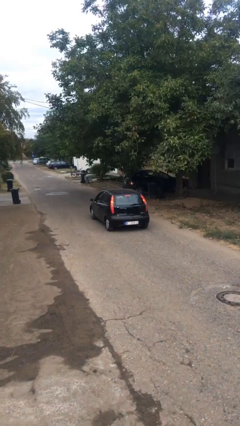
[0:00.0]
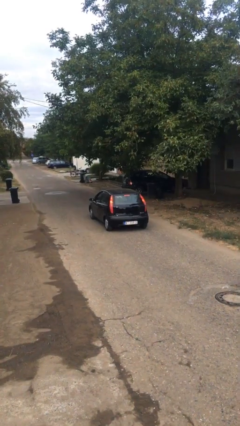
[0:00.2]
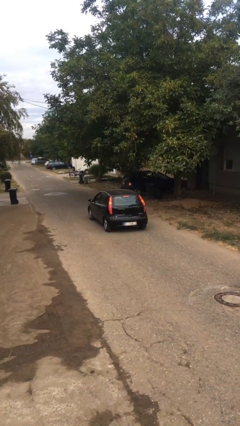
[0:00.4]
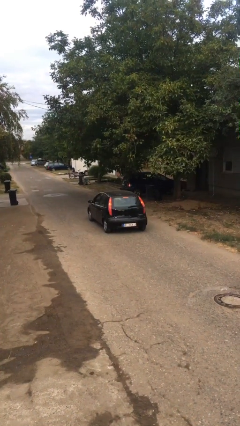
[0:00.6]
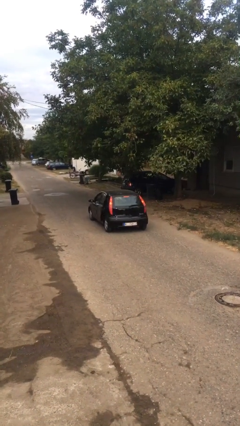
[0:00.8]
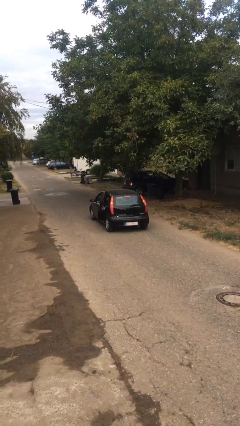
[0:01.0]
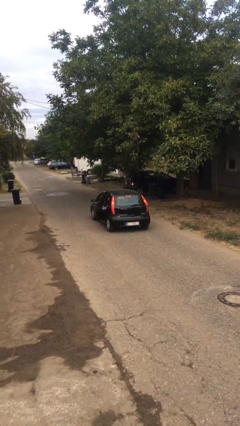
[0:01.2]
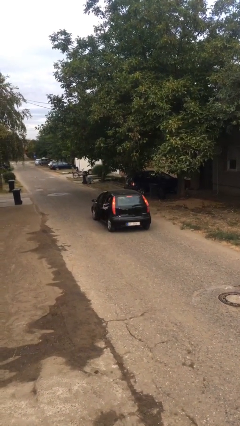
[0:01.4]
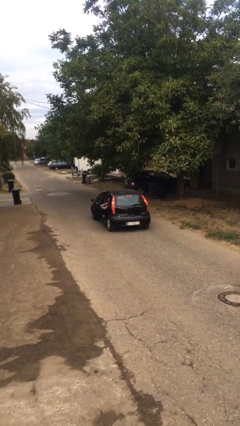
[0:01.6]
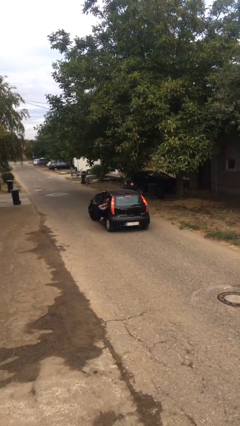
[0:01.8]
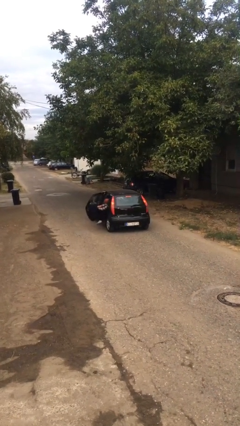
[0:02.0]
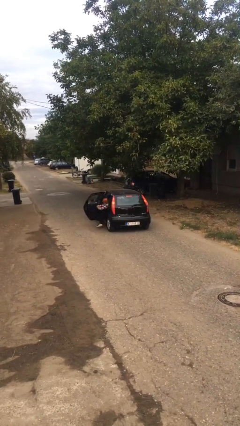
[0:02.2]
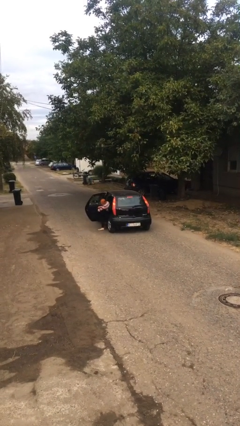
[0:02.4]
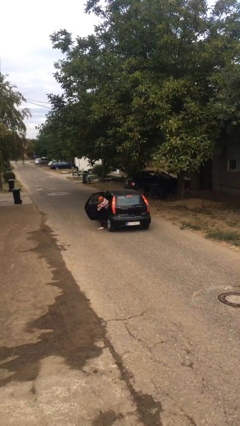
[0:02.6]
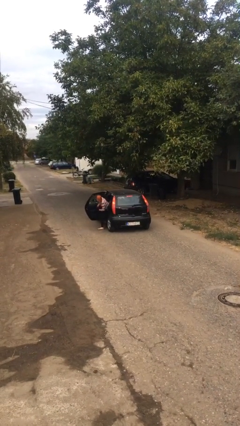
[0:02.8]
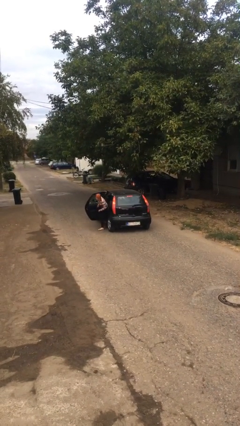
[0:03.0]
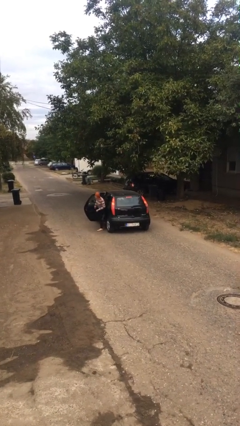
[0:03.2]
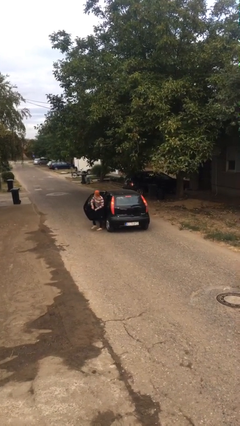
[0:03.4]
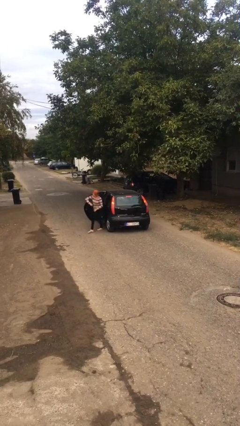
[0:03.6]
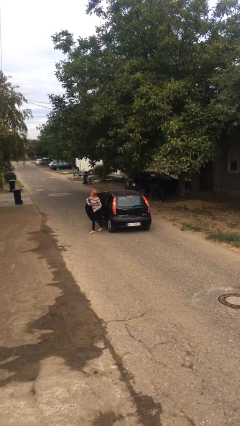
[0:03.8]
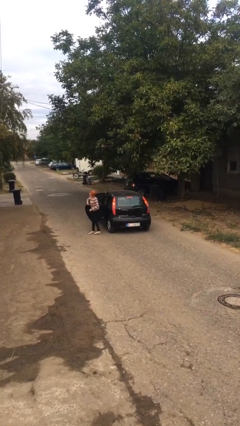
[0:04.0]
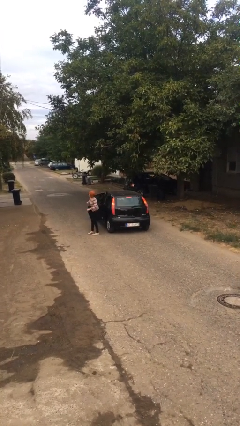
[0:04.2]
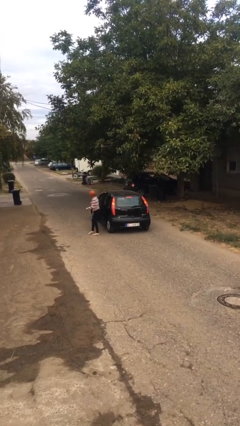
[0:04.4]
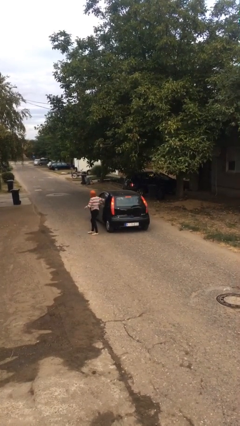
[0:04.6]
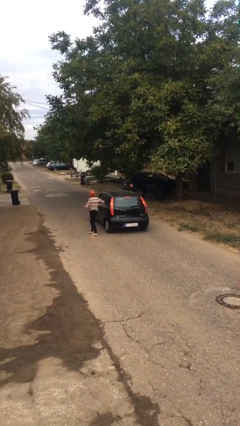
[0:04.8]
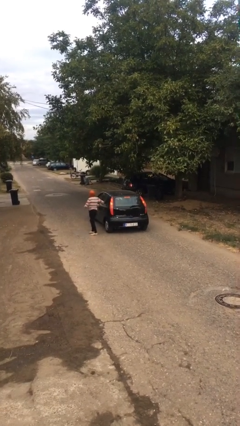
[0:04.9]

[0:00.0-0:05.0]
car drops off person

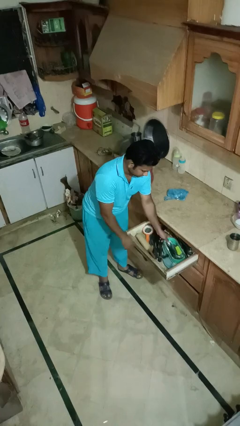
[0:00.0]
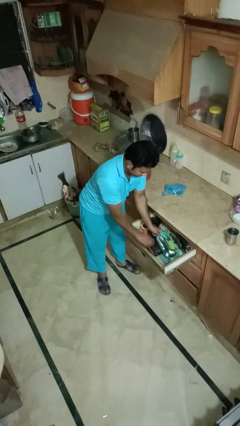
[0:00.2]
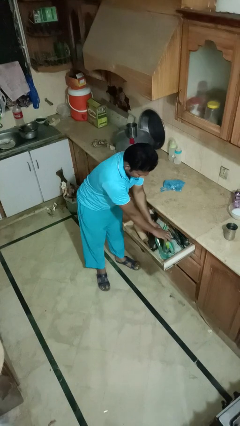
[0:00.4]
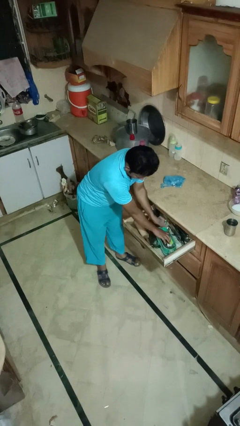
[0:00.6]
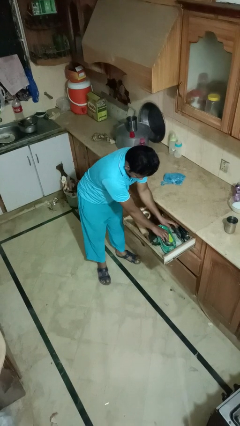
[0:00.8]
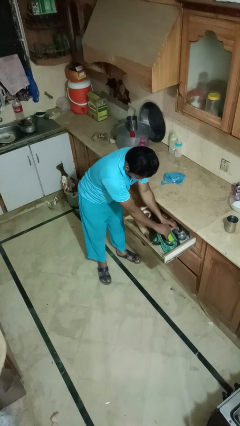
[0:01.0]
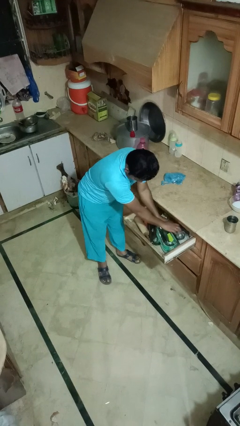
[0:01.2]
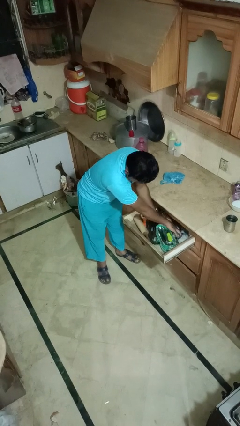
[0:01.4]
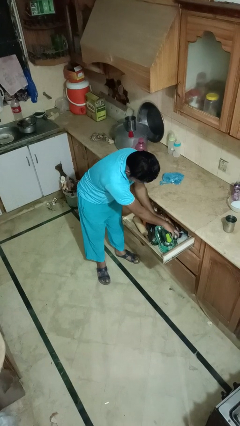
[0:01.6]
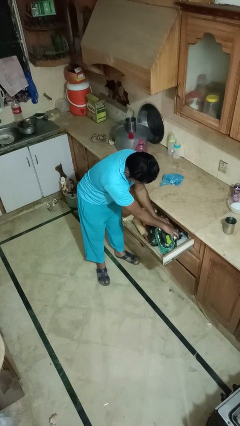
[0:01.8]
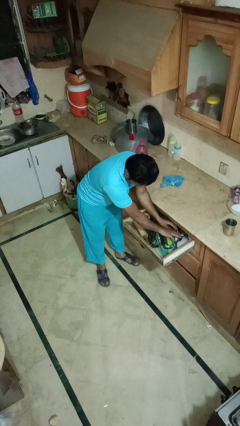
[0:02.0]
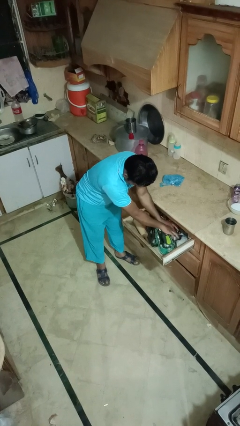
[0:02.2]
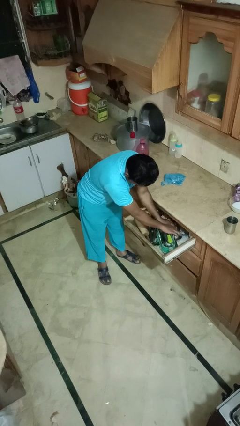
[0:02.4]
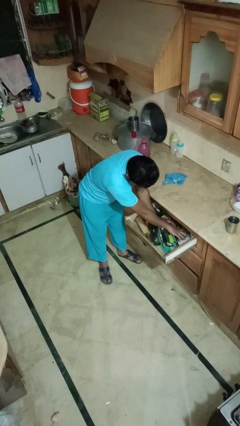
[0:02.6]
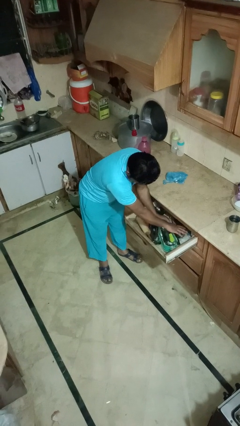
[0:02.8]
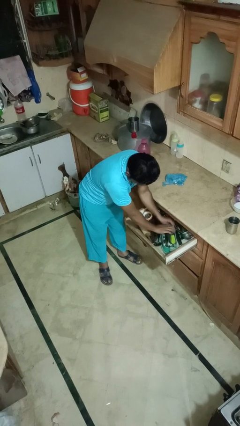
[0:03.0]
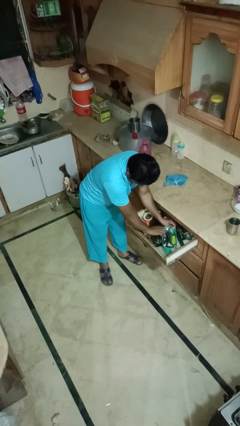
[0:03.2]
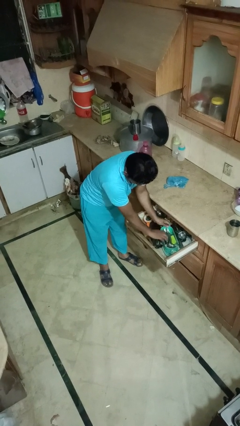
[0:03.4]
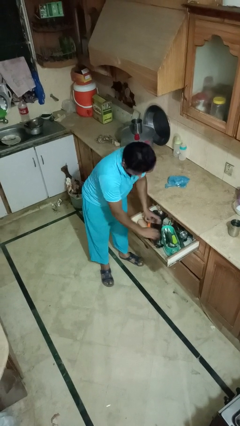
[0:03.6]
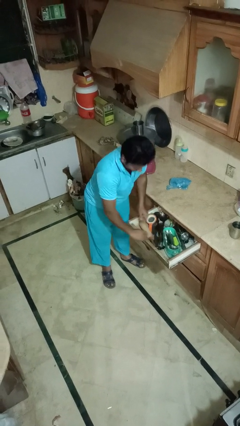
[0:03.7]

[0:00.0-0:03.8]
person searches in kitchen drawer

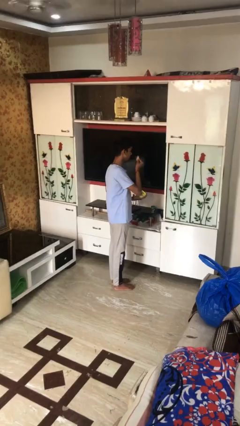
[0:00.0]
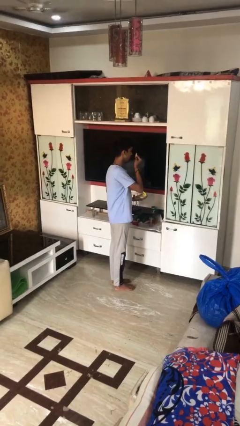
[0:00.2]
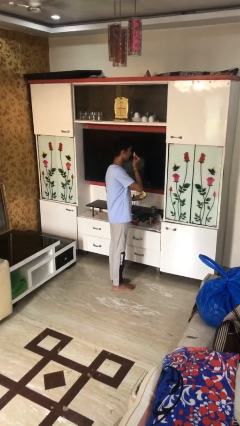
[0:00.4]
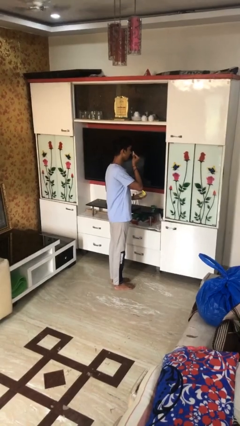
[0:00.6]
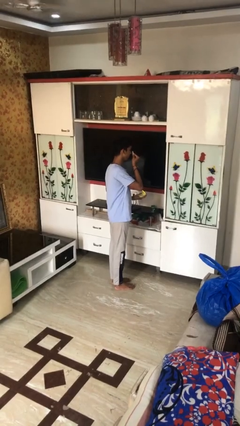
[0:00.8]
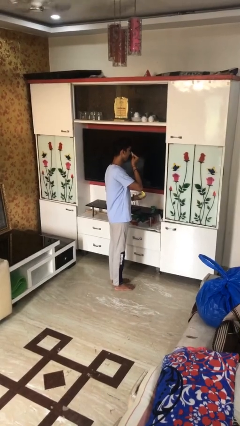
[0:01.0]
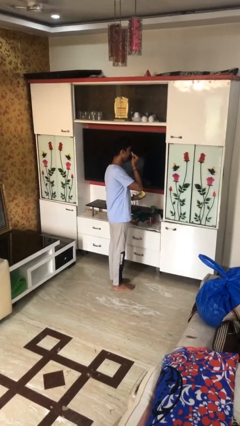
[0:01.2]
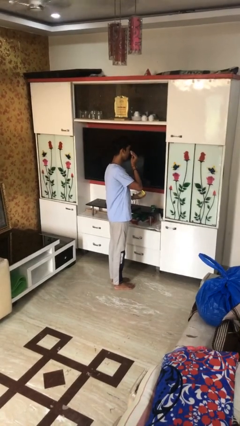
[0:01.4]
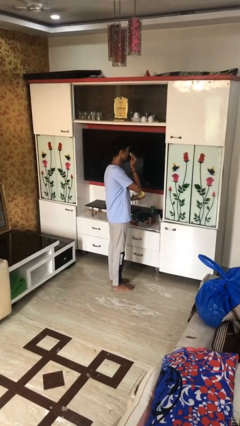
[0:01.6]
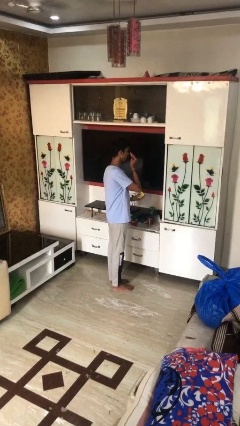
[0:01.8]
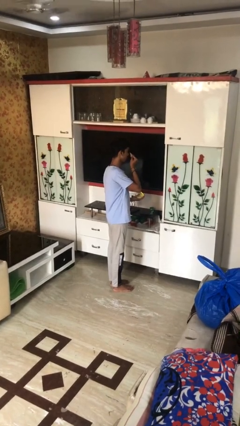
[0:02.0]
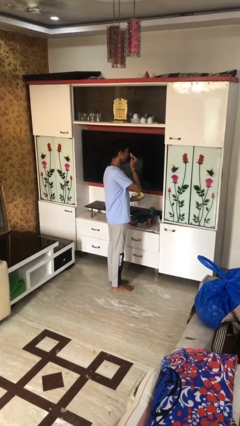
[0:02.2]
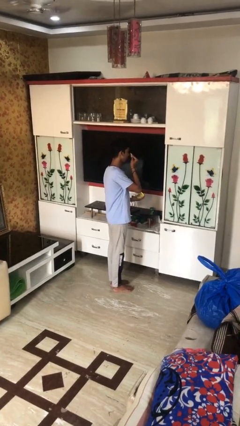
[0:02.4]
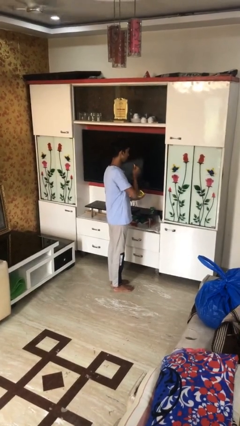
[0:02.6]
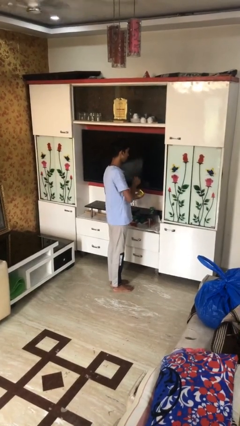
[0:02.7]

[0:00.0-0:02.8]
person applies foundation makeup

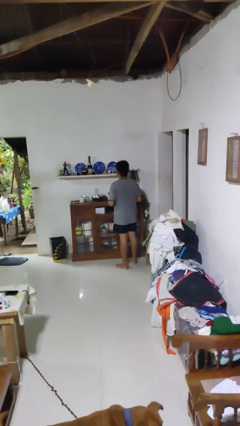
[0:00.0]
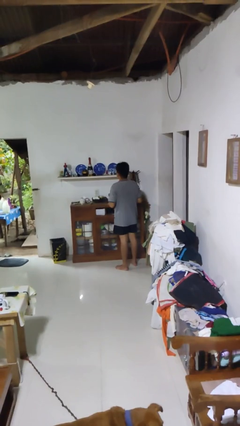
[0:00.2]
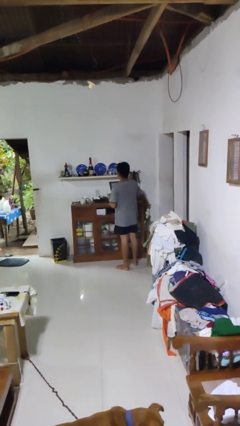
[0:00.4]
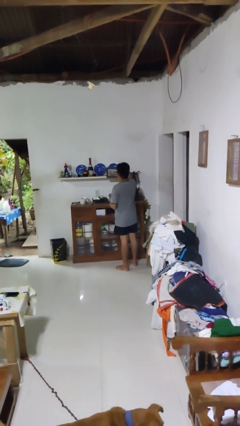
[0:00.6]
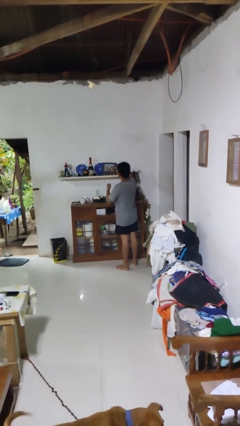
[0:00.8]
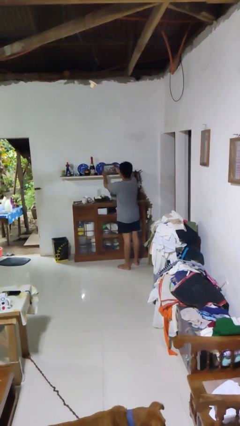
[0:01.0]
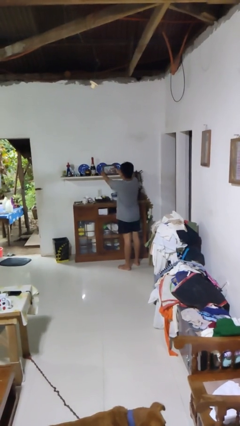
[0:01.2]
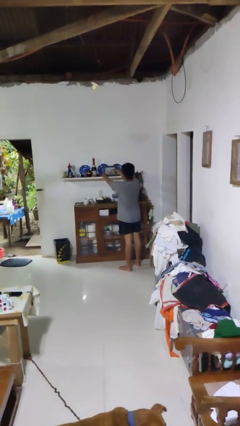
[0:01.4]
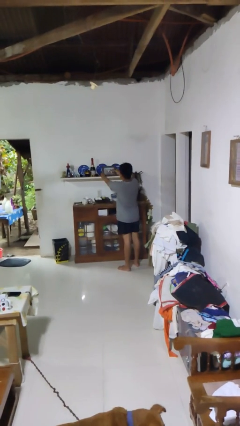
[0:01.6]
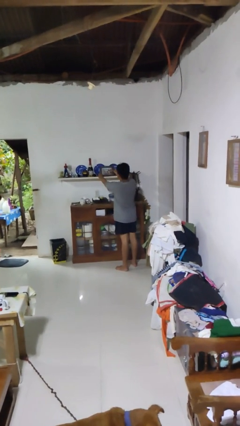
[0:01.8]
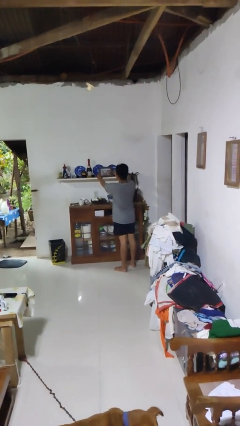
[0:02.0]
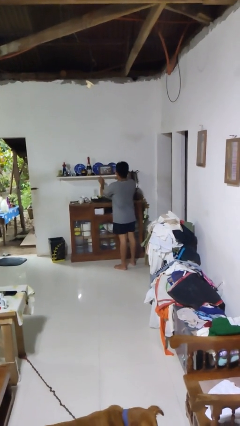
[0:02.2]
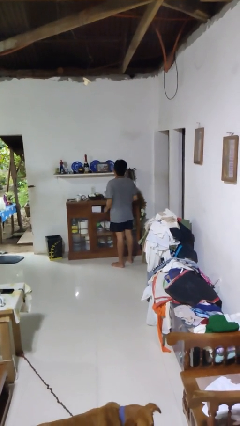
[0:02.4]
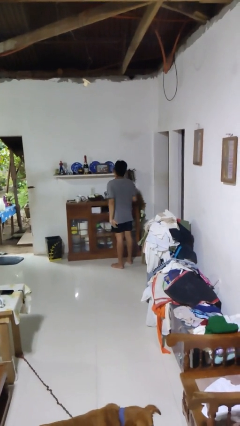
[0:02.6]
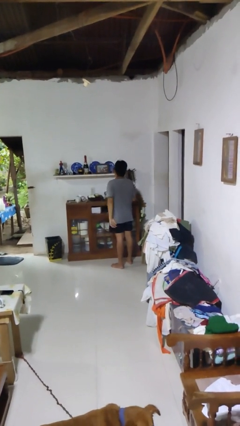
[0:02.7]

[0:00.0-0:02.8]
person puts down object on shelf

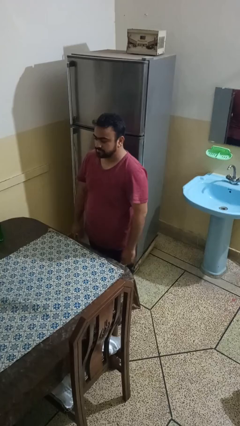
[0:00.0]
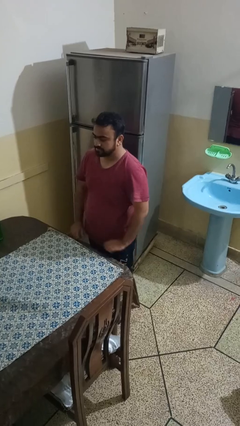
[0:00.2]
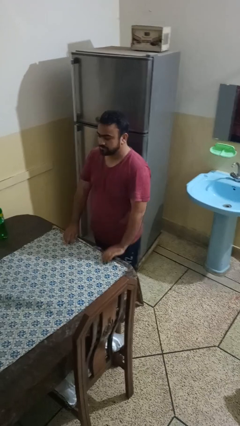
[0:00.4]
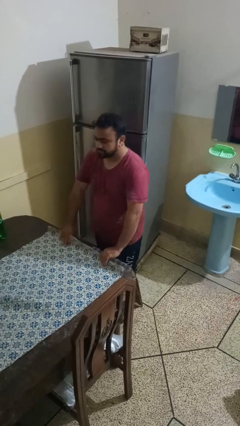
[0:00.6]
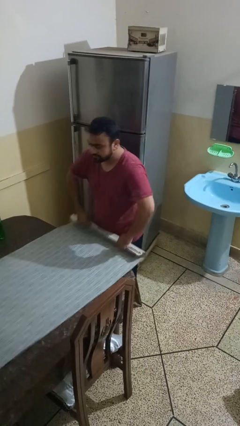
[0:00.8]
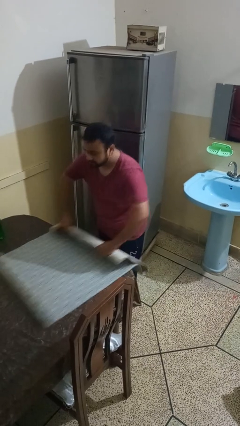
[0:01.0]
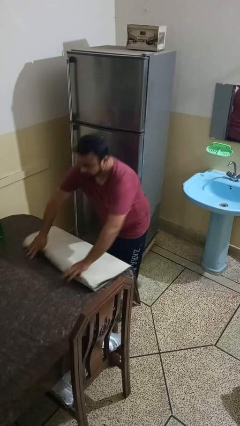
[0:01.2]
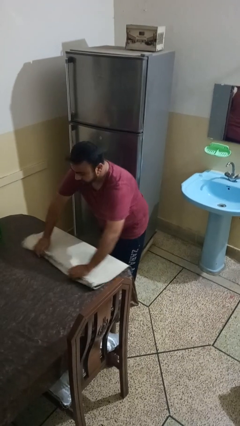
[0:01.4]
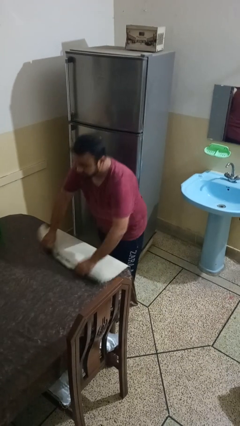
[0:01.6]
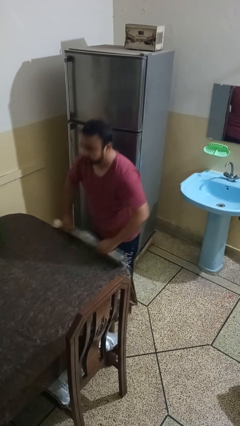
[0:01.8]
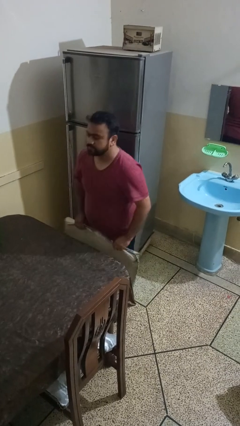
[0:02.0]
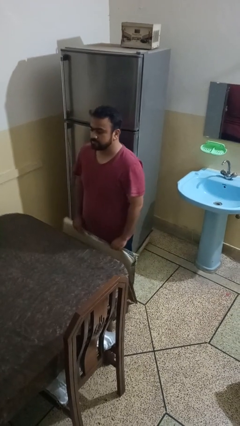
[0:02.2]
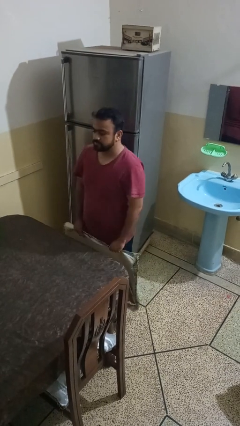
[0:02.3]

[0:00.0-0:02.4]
person folds tablecloth

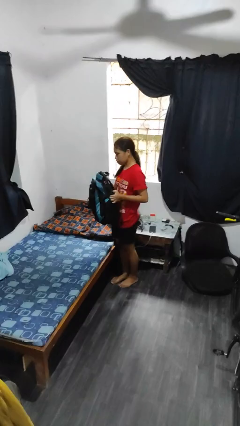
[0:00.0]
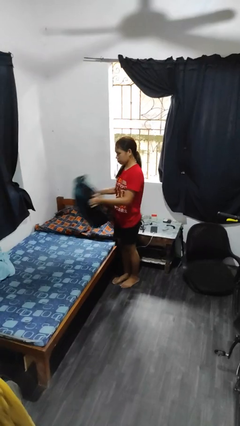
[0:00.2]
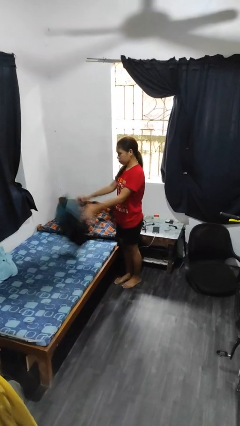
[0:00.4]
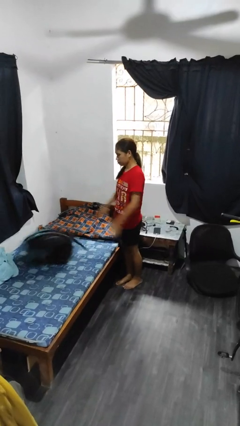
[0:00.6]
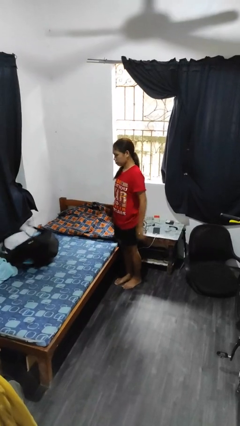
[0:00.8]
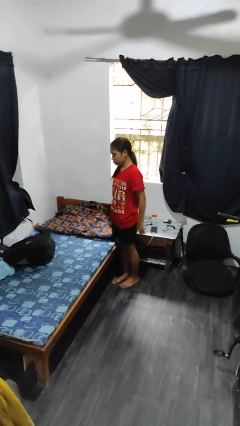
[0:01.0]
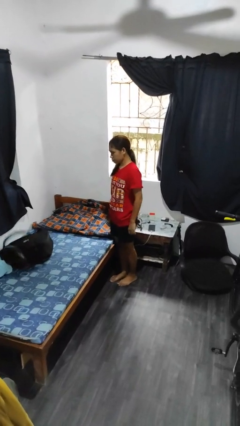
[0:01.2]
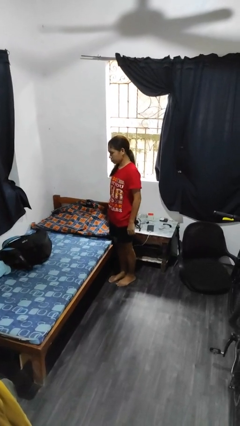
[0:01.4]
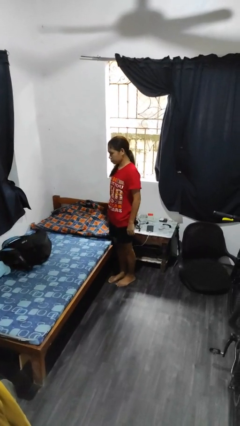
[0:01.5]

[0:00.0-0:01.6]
person throws object on bed
